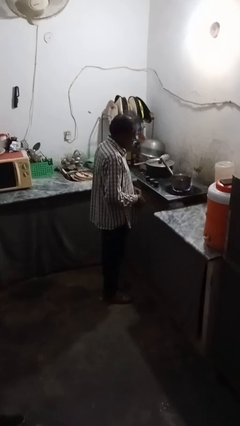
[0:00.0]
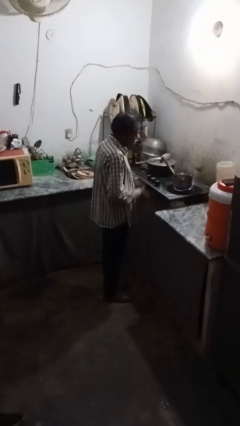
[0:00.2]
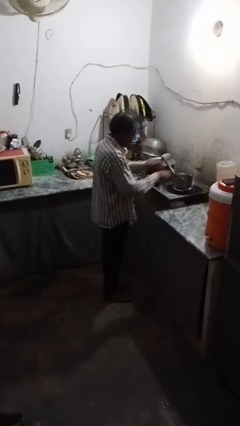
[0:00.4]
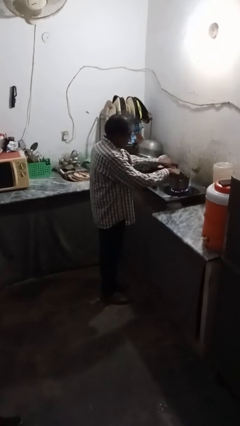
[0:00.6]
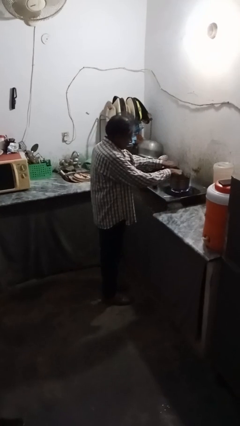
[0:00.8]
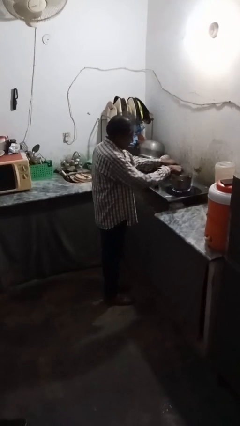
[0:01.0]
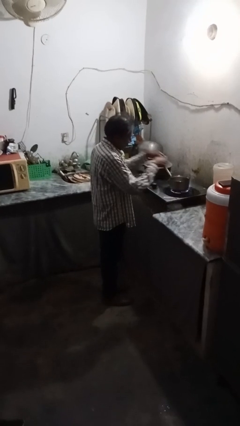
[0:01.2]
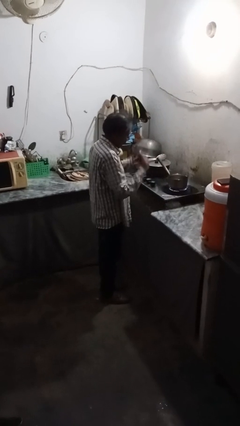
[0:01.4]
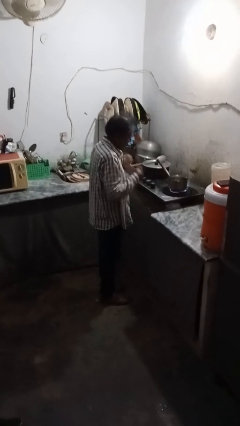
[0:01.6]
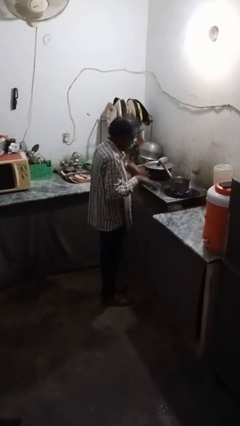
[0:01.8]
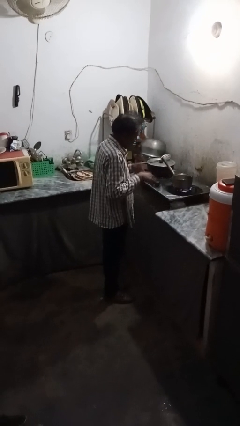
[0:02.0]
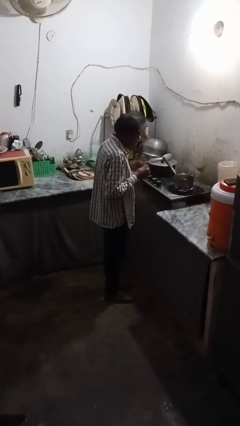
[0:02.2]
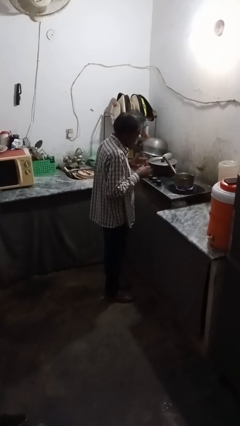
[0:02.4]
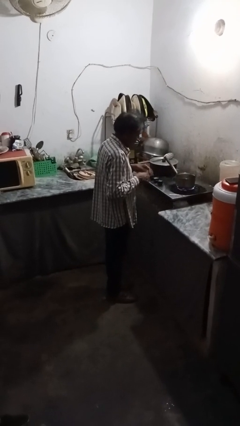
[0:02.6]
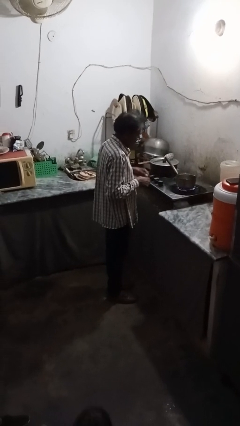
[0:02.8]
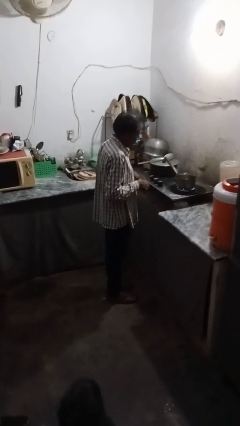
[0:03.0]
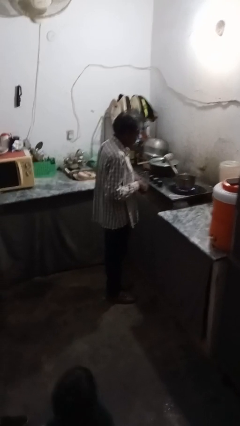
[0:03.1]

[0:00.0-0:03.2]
person burns hand

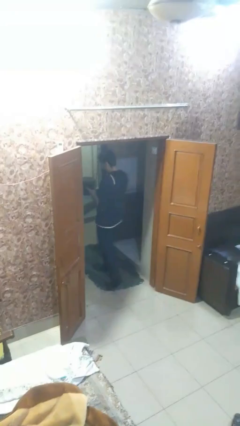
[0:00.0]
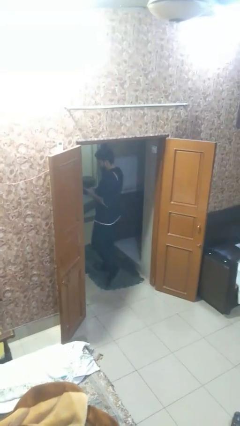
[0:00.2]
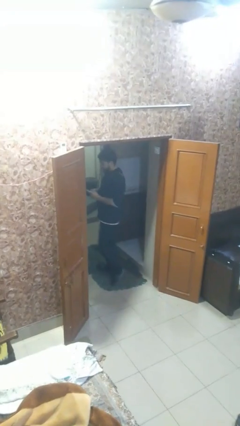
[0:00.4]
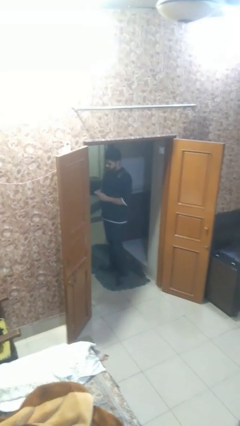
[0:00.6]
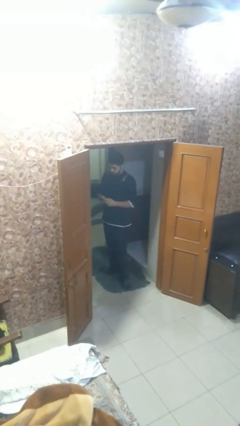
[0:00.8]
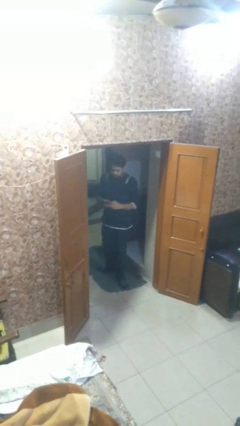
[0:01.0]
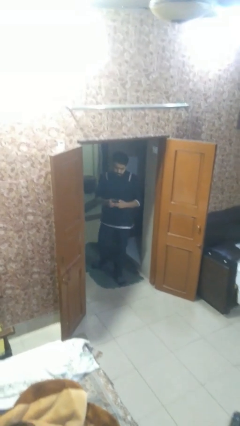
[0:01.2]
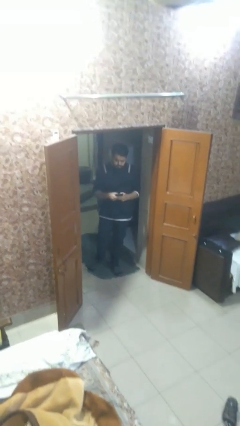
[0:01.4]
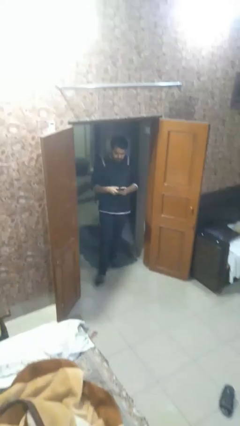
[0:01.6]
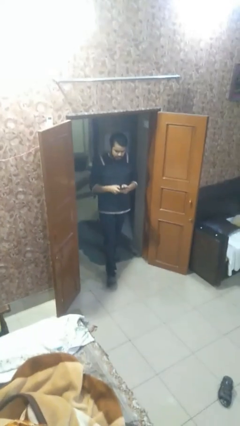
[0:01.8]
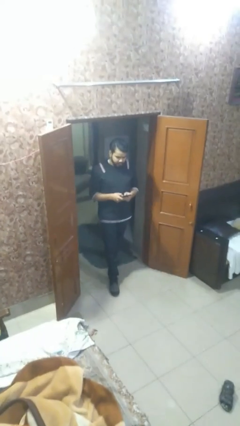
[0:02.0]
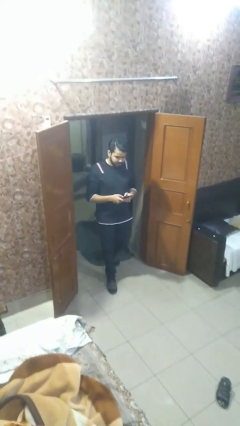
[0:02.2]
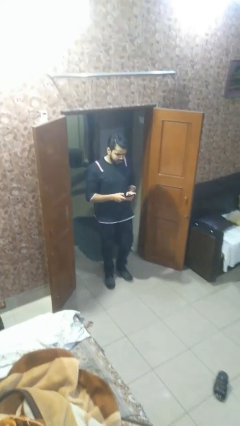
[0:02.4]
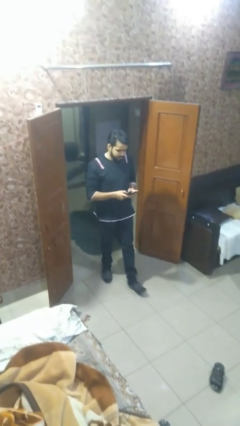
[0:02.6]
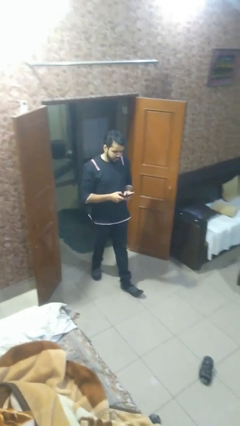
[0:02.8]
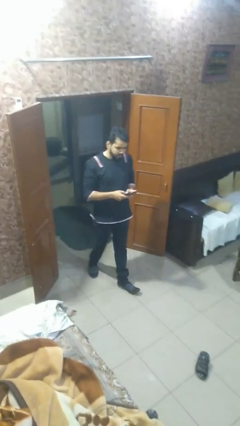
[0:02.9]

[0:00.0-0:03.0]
person exits scene through structure

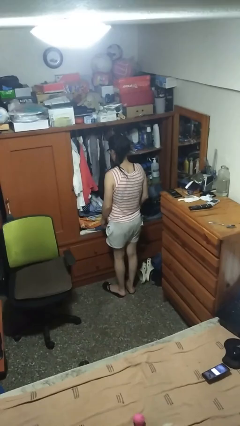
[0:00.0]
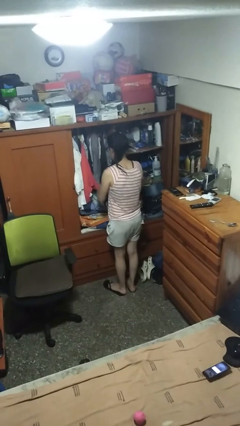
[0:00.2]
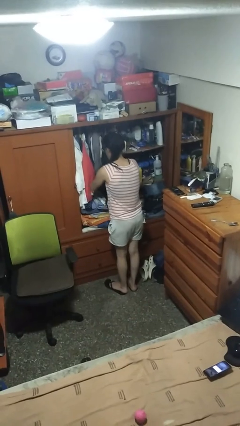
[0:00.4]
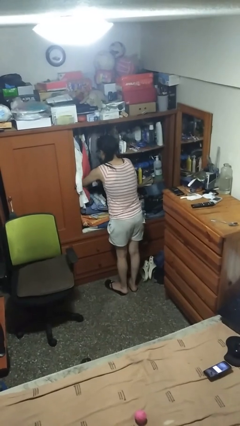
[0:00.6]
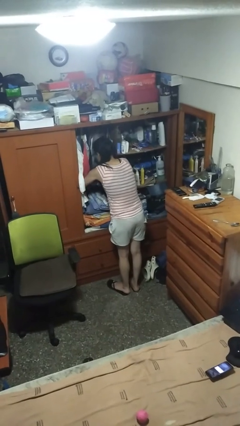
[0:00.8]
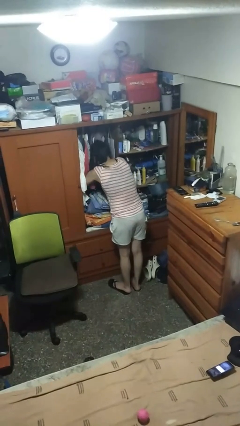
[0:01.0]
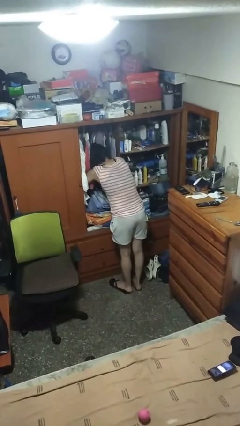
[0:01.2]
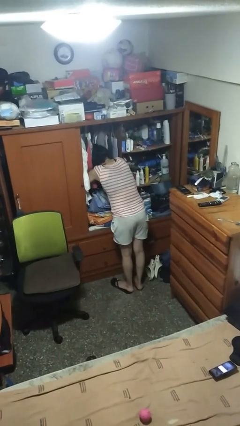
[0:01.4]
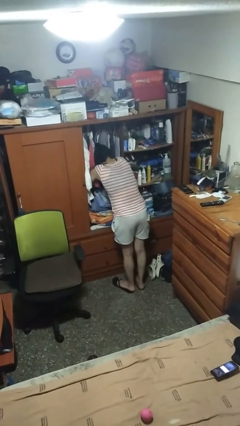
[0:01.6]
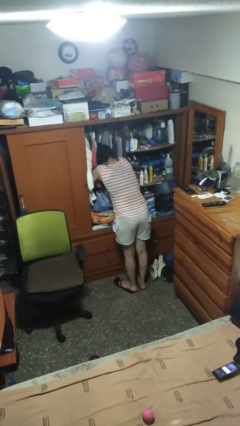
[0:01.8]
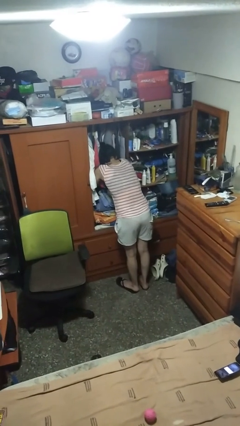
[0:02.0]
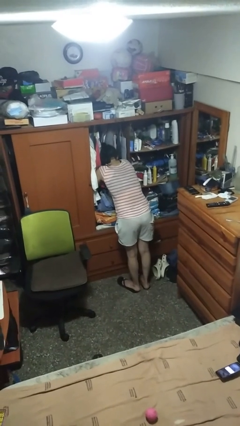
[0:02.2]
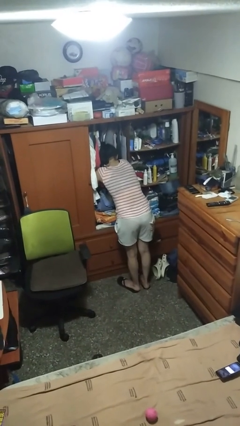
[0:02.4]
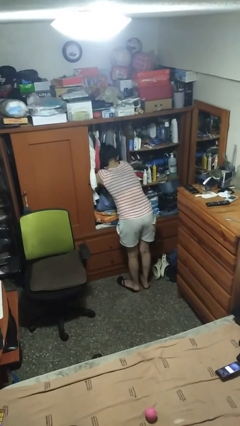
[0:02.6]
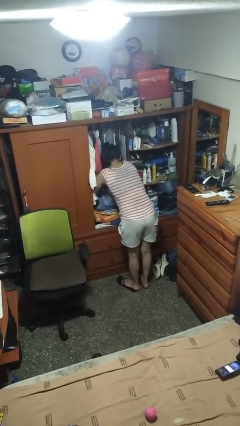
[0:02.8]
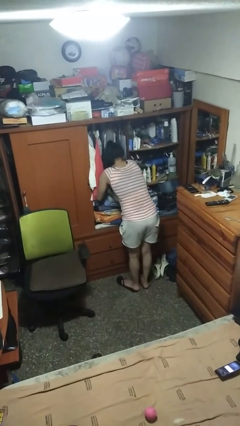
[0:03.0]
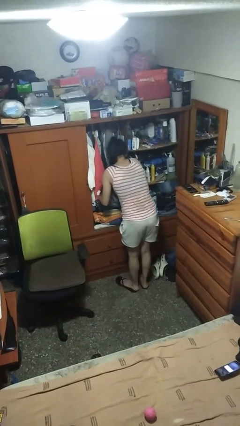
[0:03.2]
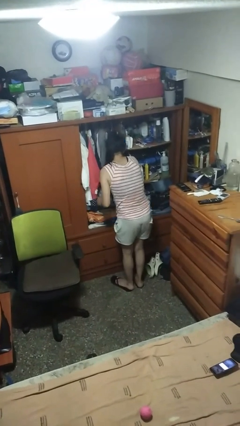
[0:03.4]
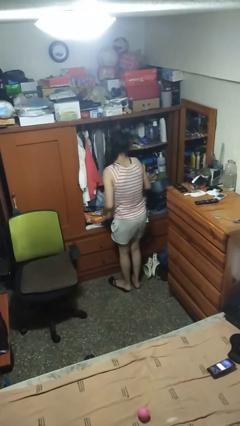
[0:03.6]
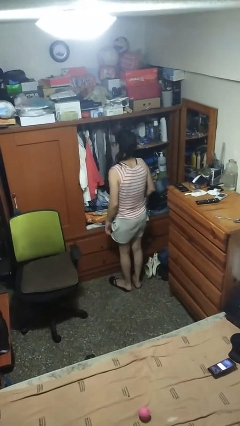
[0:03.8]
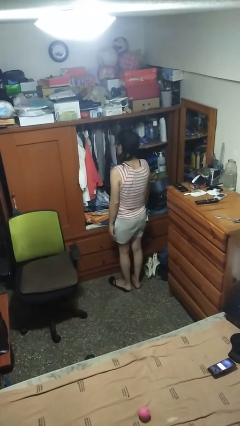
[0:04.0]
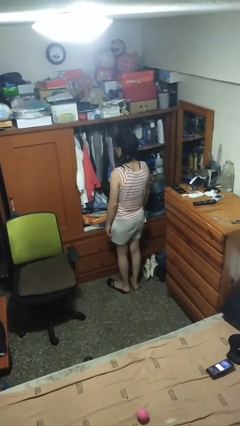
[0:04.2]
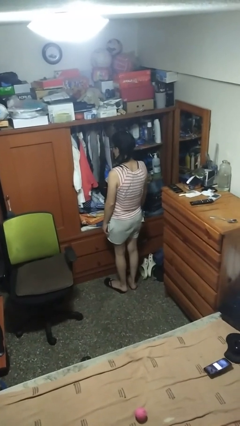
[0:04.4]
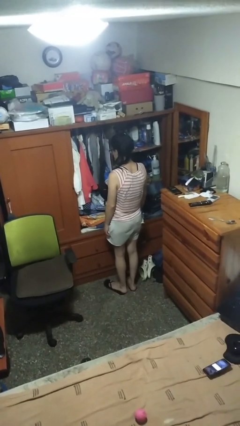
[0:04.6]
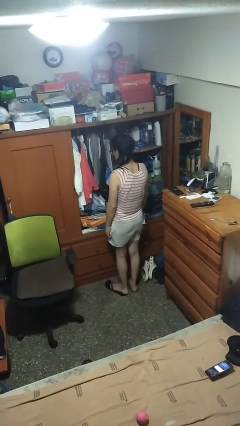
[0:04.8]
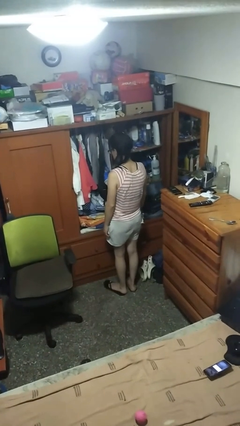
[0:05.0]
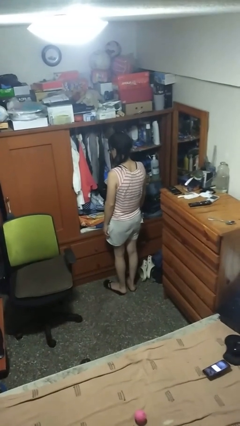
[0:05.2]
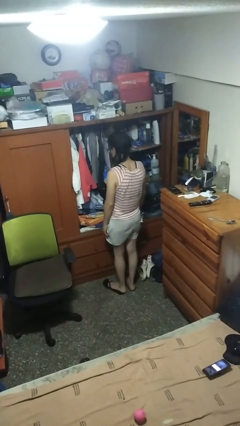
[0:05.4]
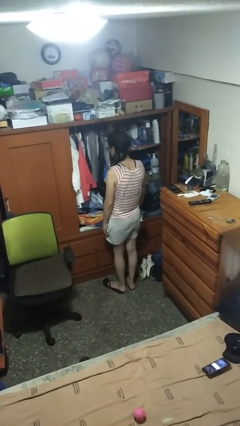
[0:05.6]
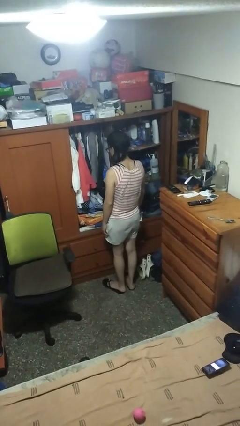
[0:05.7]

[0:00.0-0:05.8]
person searches in cabinet

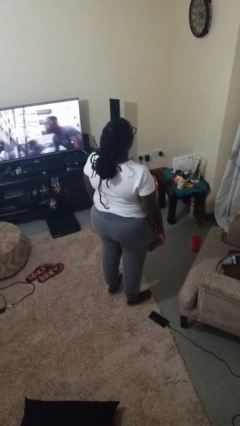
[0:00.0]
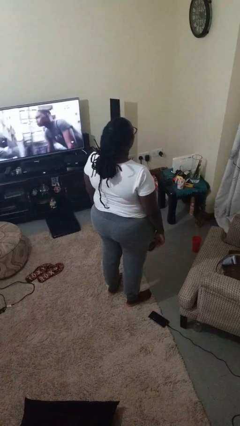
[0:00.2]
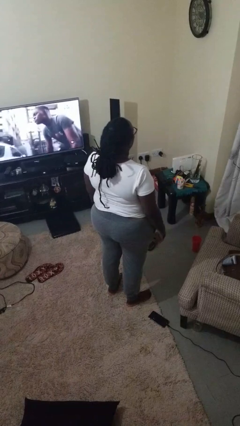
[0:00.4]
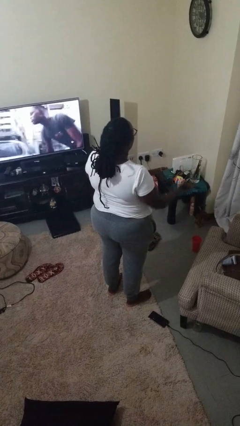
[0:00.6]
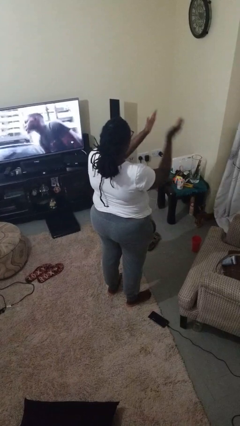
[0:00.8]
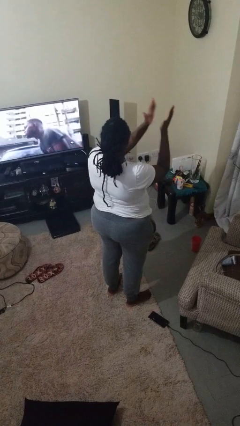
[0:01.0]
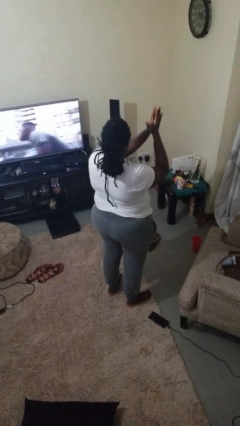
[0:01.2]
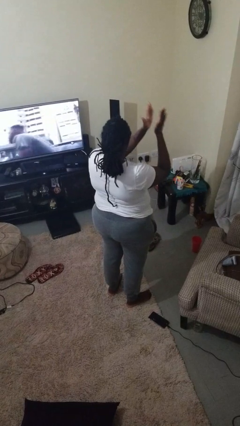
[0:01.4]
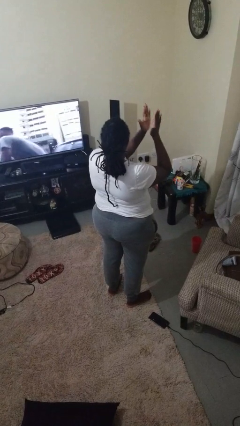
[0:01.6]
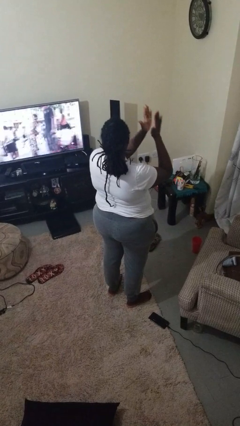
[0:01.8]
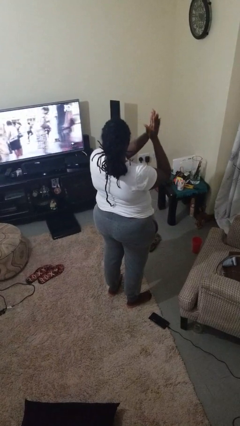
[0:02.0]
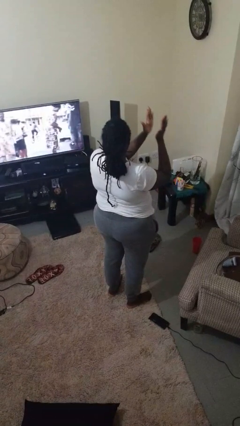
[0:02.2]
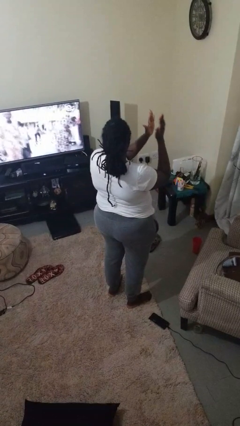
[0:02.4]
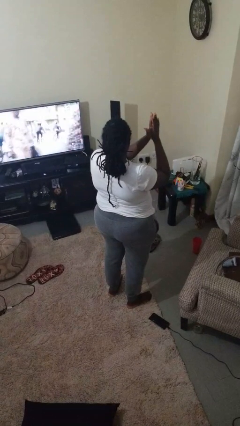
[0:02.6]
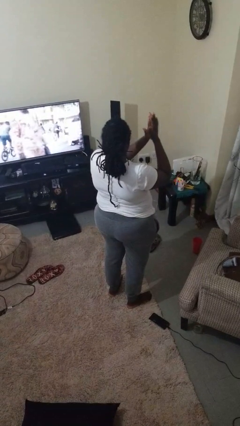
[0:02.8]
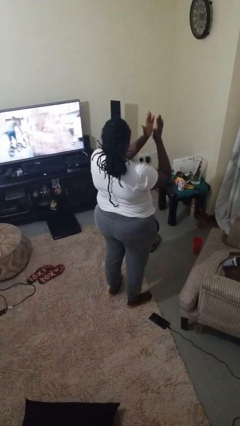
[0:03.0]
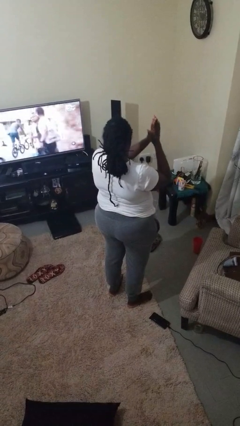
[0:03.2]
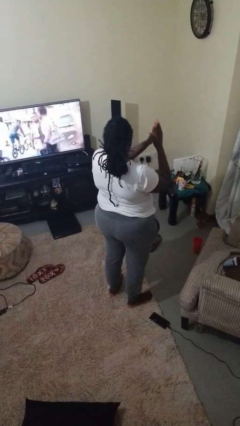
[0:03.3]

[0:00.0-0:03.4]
person claps hands

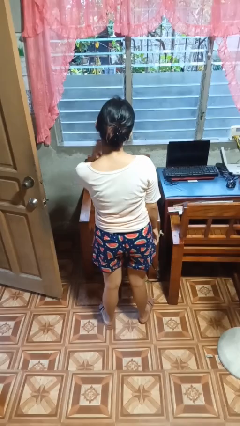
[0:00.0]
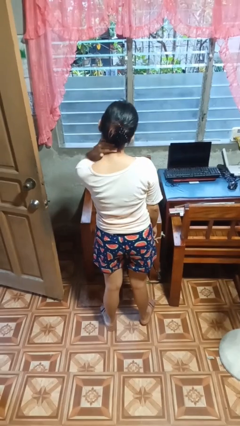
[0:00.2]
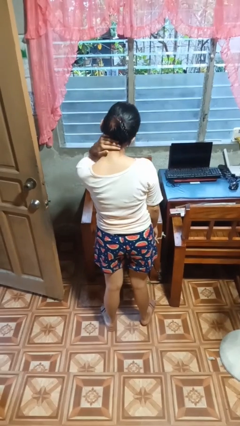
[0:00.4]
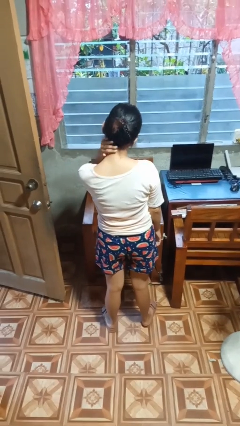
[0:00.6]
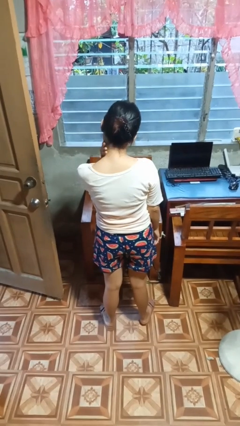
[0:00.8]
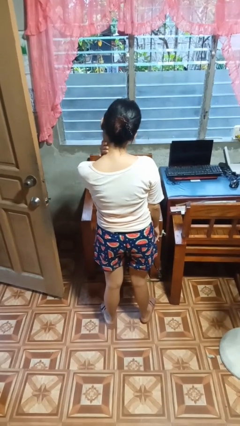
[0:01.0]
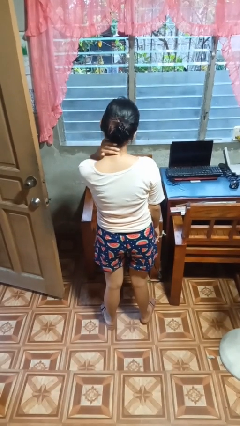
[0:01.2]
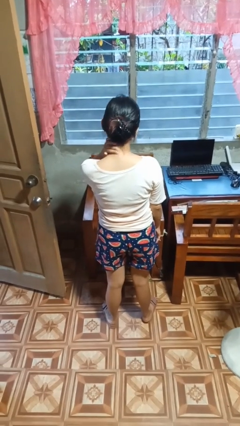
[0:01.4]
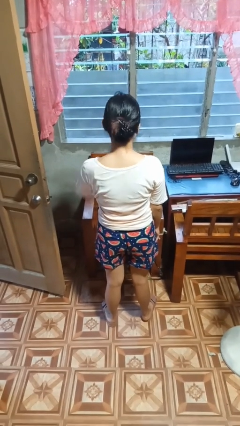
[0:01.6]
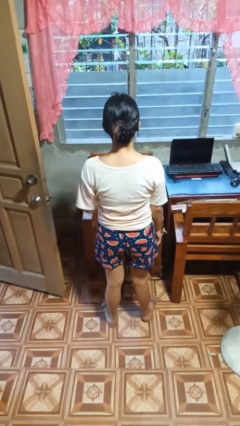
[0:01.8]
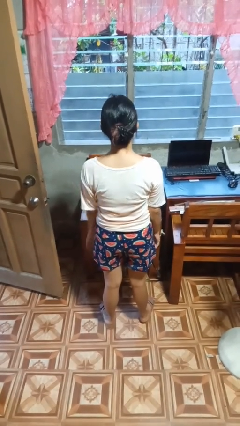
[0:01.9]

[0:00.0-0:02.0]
person rubs neck

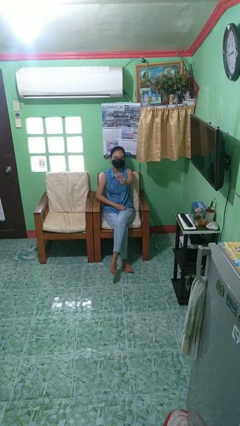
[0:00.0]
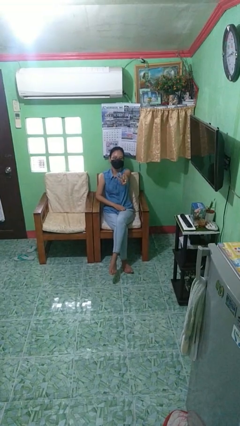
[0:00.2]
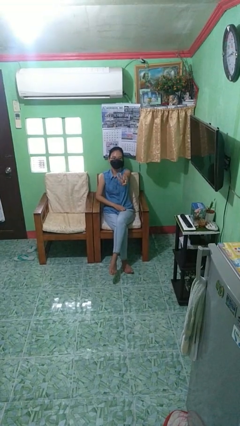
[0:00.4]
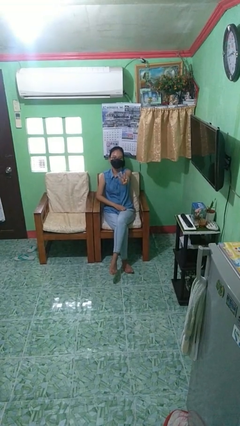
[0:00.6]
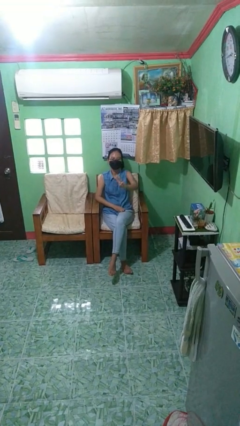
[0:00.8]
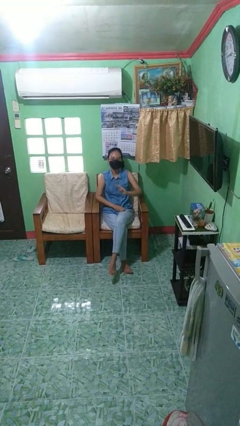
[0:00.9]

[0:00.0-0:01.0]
person gestures number three
